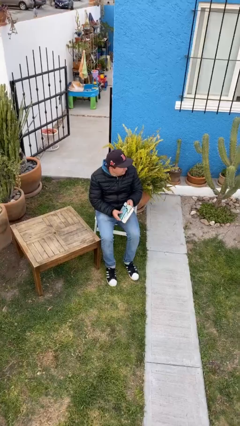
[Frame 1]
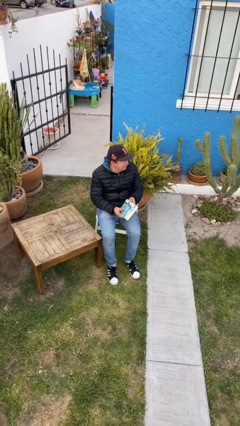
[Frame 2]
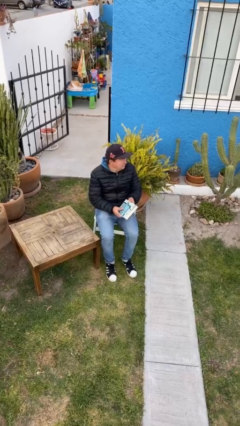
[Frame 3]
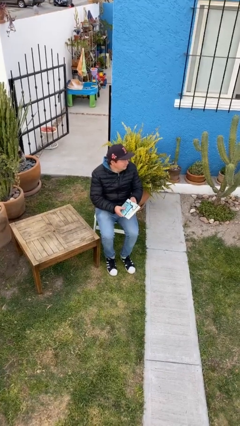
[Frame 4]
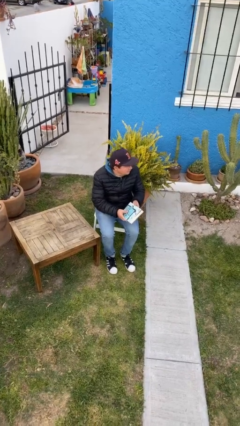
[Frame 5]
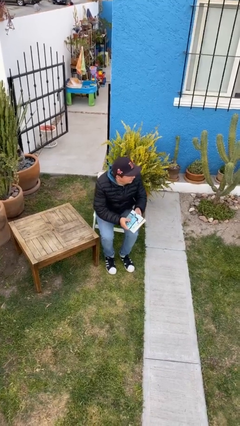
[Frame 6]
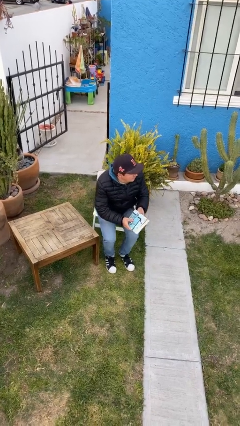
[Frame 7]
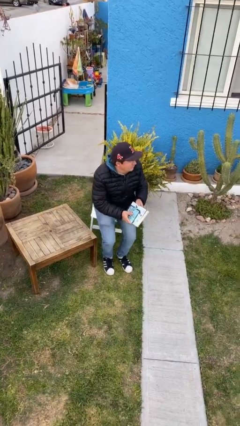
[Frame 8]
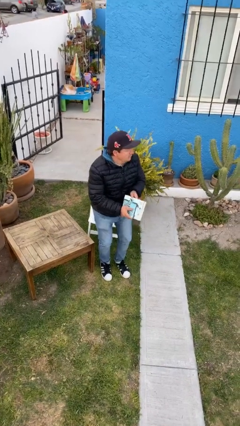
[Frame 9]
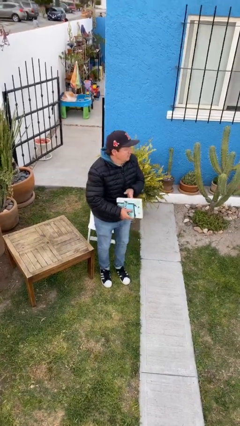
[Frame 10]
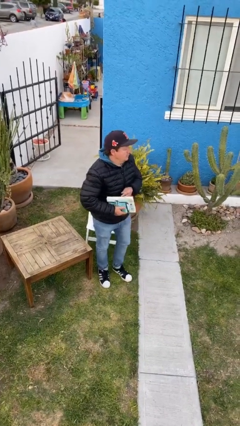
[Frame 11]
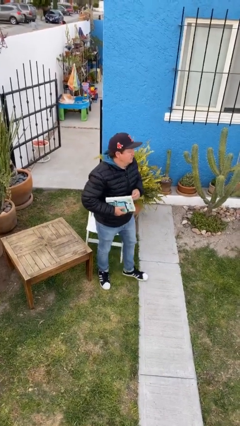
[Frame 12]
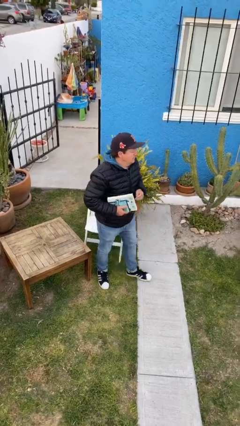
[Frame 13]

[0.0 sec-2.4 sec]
person stands up

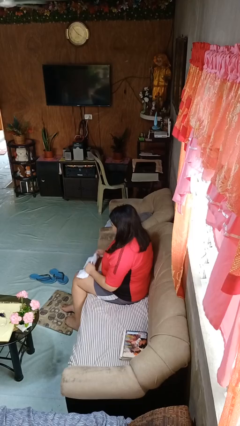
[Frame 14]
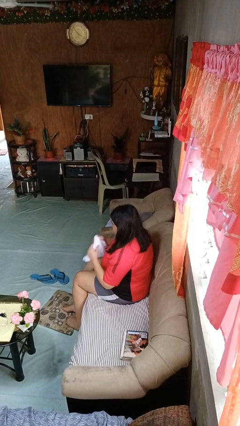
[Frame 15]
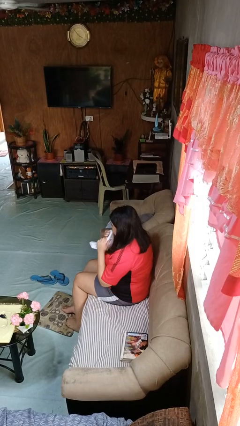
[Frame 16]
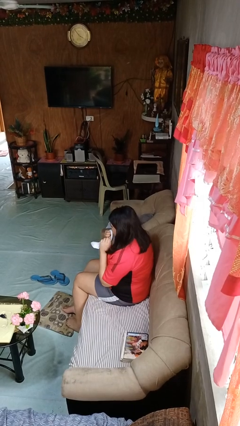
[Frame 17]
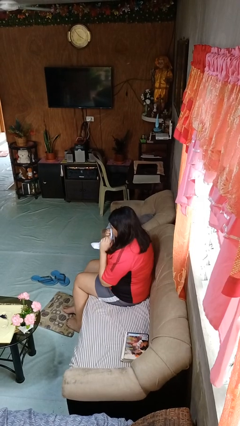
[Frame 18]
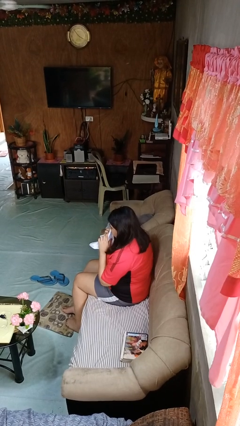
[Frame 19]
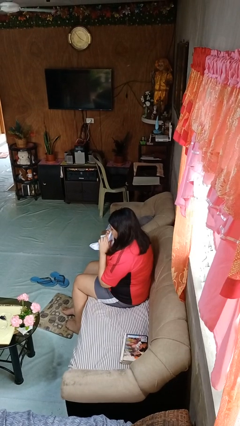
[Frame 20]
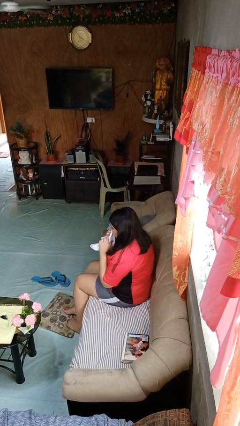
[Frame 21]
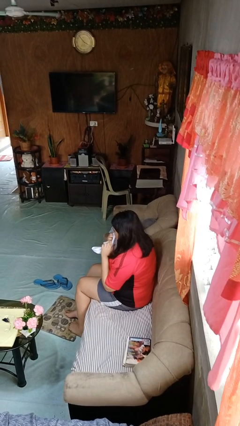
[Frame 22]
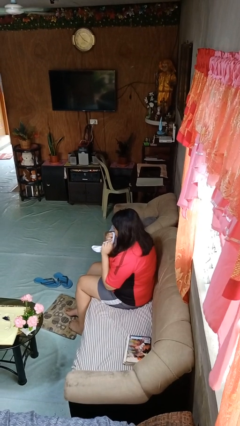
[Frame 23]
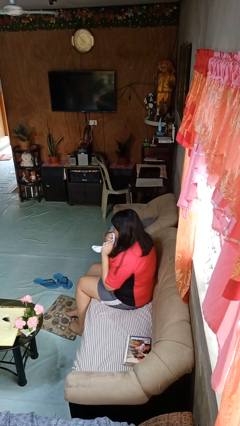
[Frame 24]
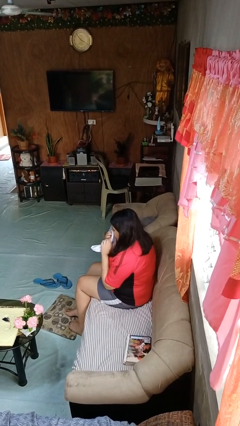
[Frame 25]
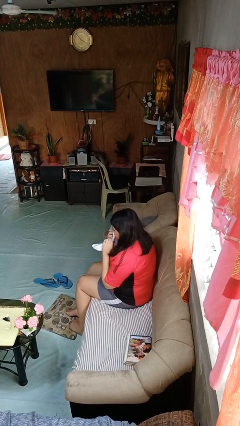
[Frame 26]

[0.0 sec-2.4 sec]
person wipes mouth with napkin

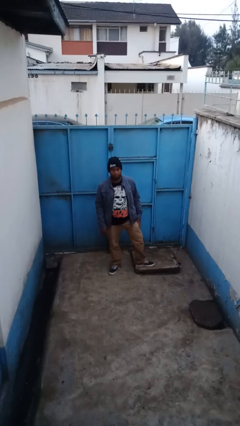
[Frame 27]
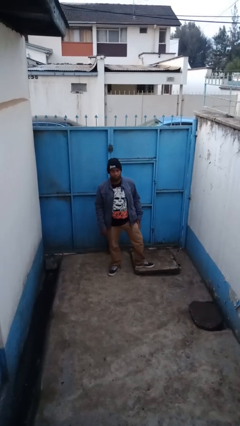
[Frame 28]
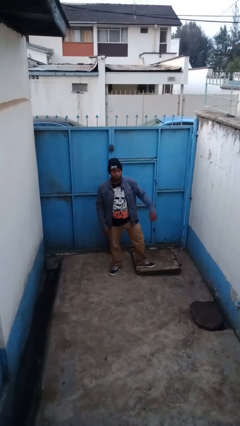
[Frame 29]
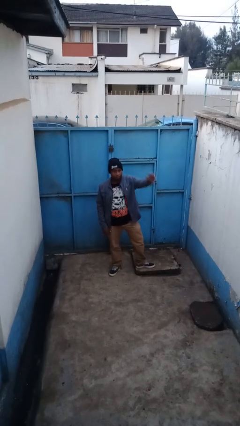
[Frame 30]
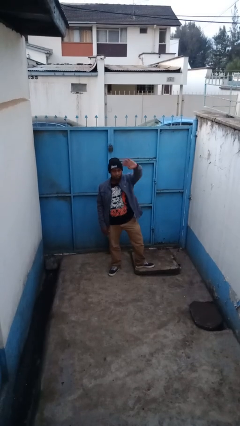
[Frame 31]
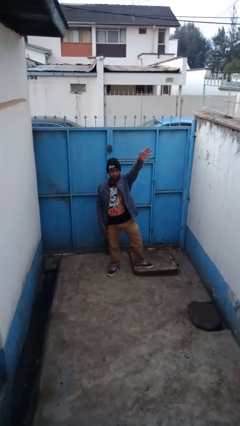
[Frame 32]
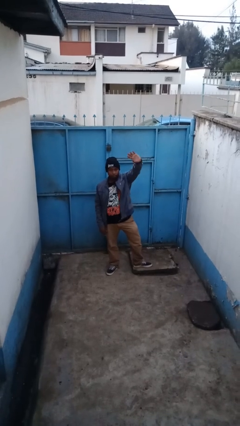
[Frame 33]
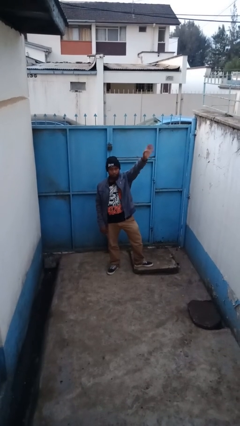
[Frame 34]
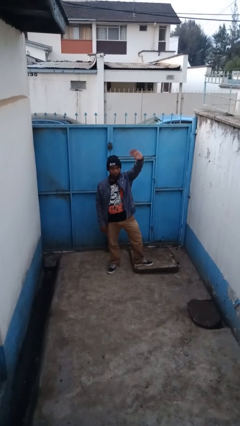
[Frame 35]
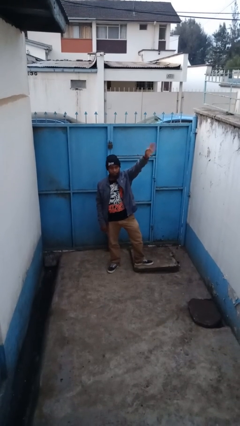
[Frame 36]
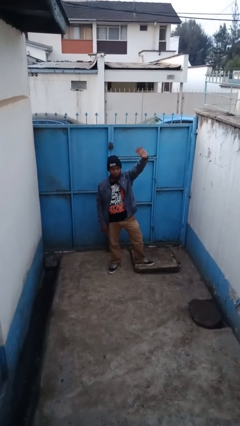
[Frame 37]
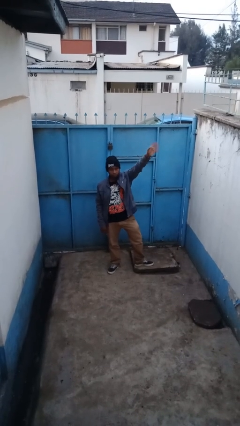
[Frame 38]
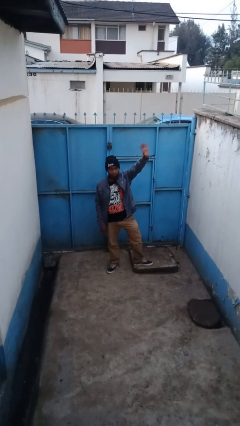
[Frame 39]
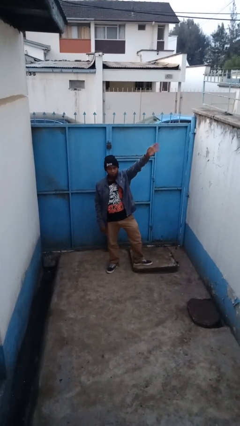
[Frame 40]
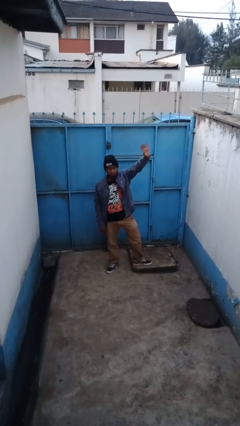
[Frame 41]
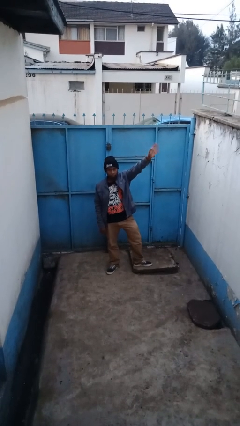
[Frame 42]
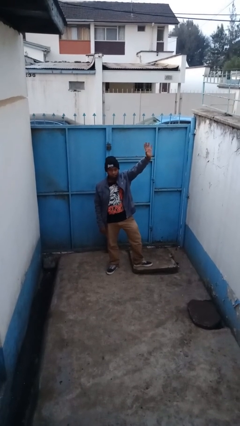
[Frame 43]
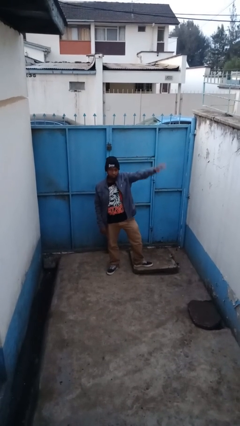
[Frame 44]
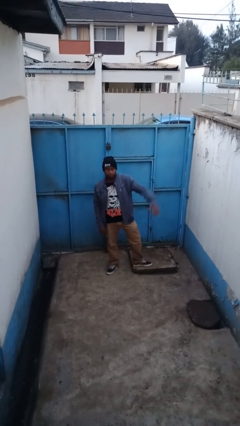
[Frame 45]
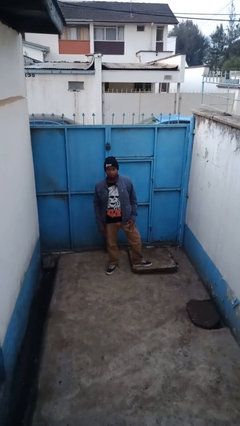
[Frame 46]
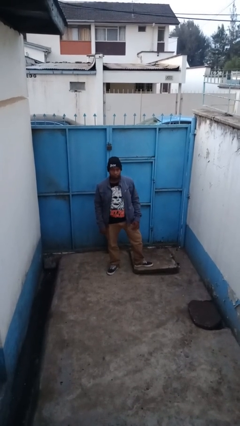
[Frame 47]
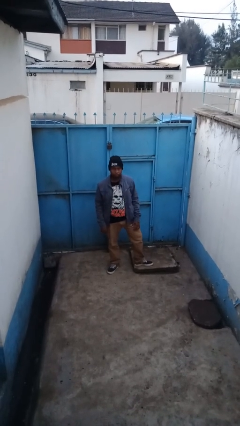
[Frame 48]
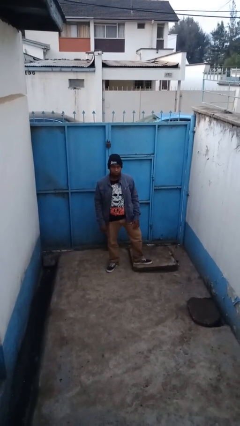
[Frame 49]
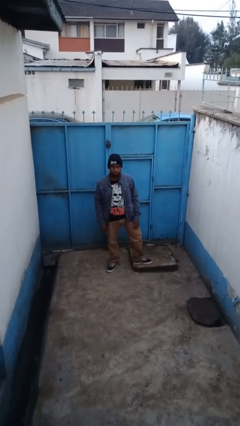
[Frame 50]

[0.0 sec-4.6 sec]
person waves at person

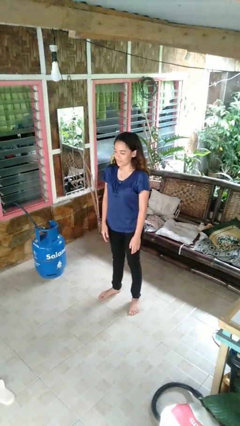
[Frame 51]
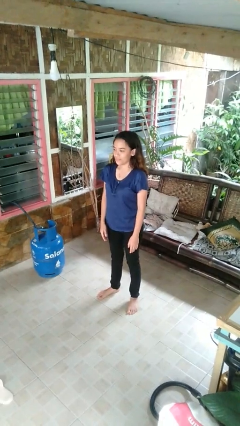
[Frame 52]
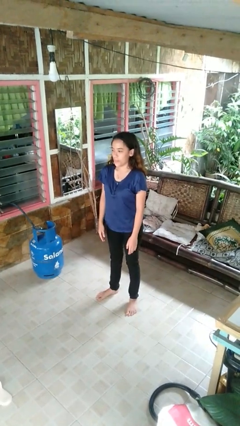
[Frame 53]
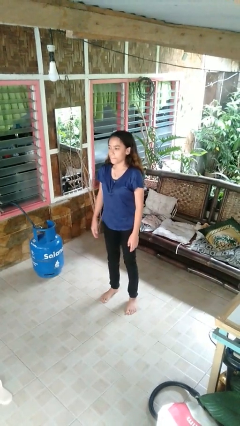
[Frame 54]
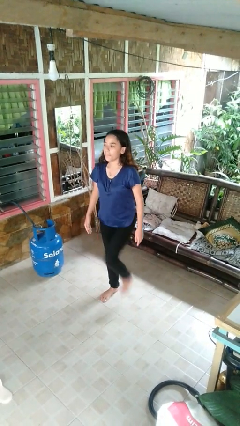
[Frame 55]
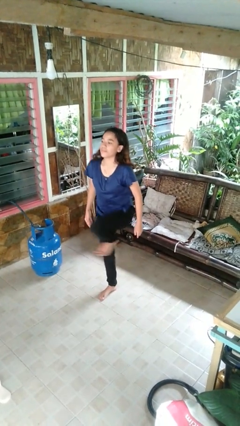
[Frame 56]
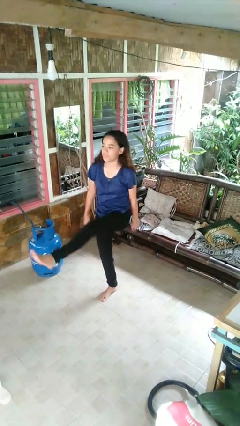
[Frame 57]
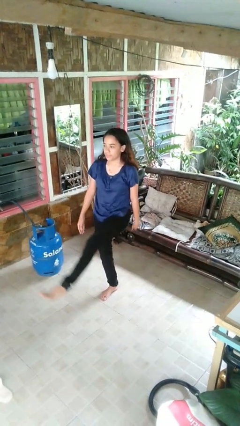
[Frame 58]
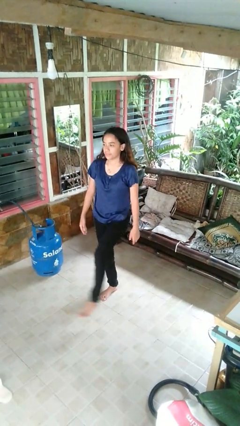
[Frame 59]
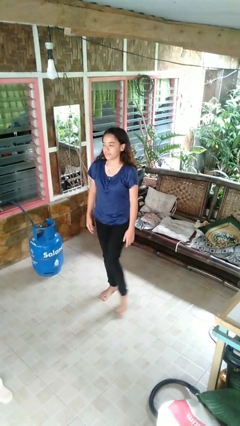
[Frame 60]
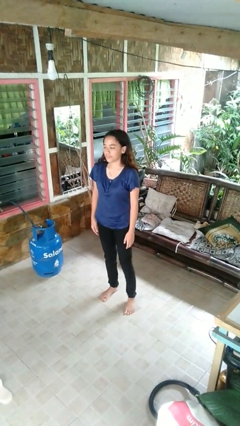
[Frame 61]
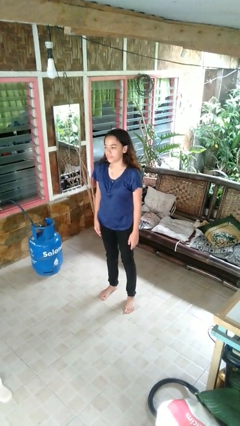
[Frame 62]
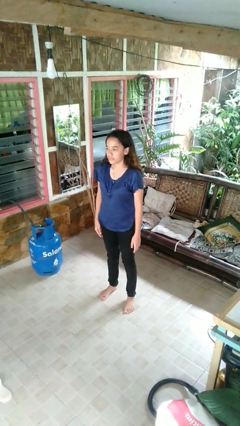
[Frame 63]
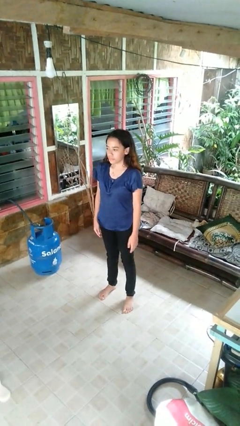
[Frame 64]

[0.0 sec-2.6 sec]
person karate kicks

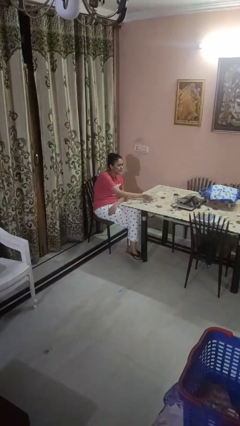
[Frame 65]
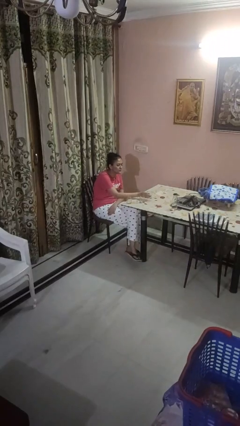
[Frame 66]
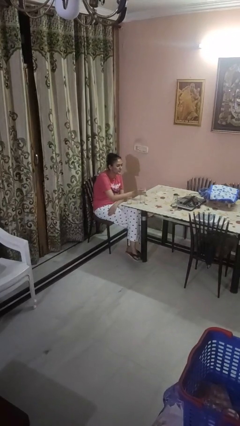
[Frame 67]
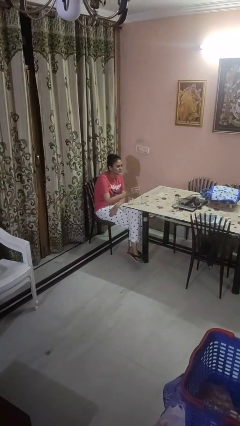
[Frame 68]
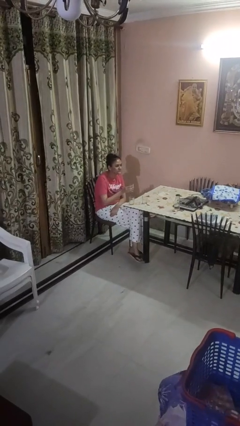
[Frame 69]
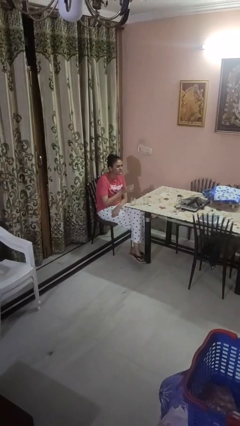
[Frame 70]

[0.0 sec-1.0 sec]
person picks up object from table

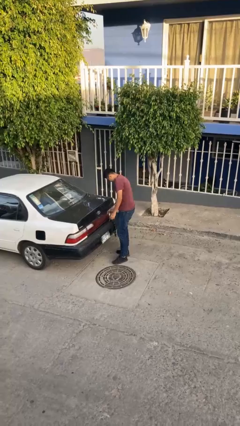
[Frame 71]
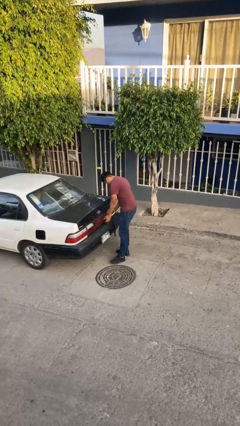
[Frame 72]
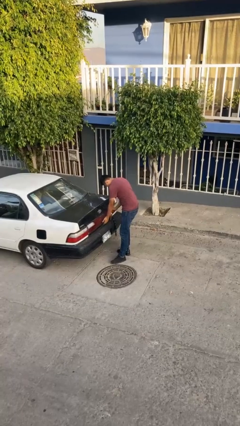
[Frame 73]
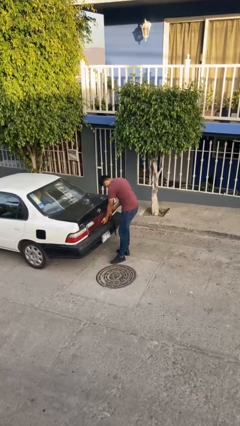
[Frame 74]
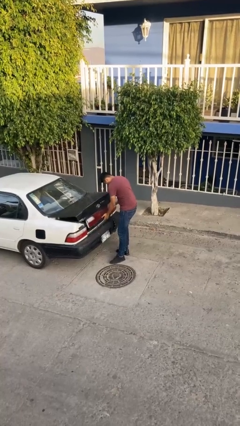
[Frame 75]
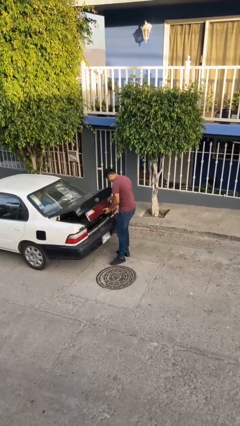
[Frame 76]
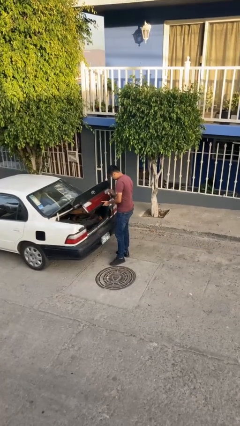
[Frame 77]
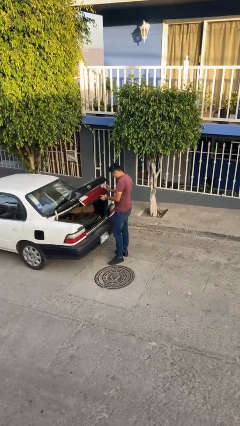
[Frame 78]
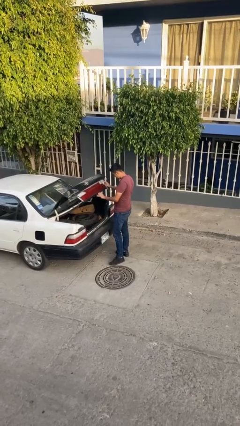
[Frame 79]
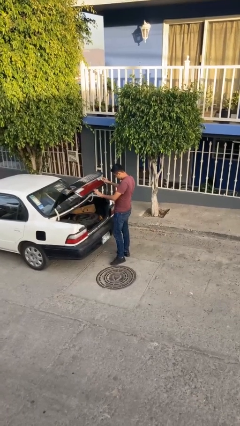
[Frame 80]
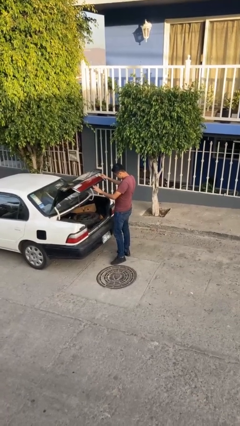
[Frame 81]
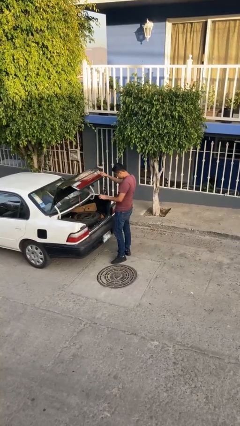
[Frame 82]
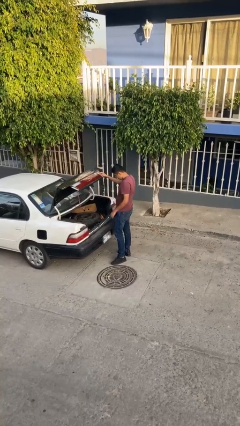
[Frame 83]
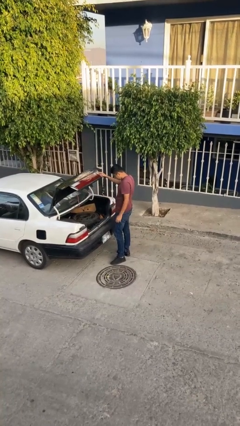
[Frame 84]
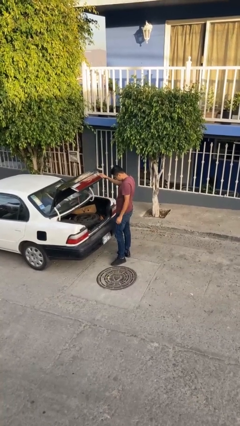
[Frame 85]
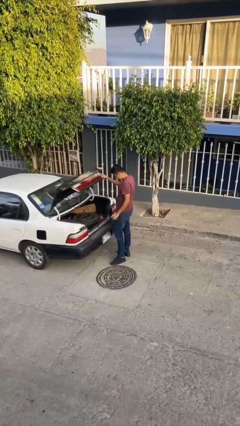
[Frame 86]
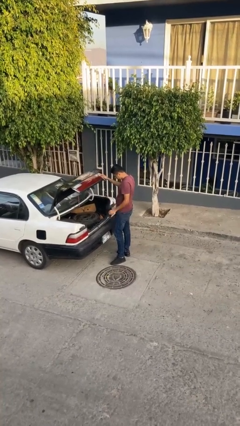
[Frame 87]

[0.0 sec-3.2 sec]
person opens car trunk

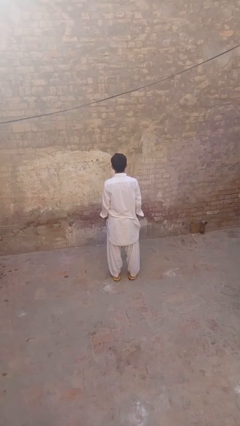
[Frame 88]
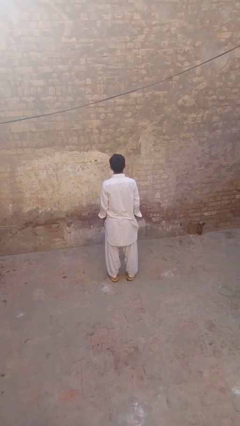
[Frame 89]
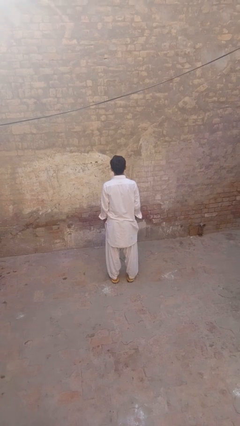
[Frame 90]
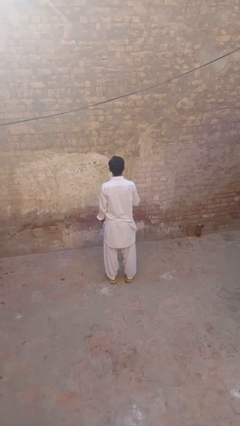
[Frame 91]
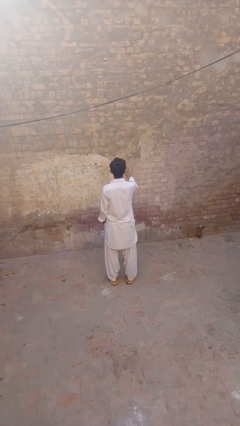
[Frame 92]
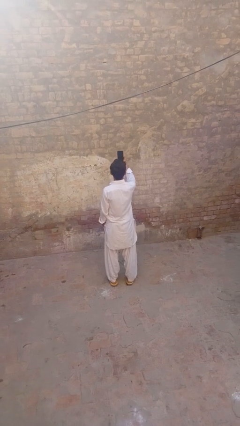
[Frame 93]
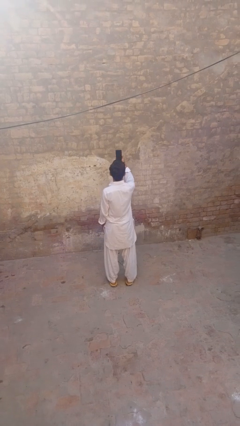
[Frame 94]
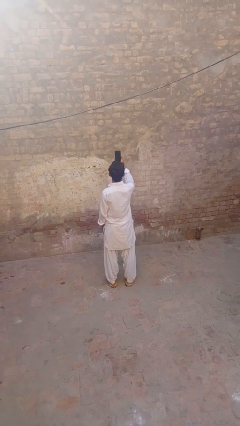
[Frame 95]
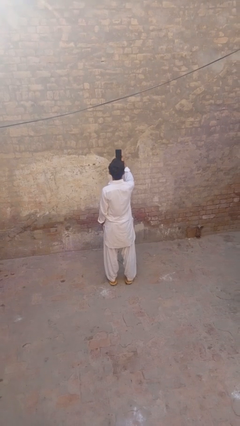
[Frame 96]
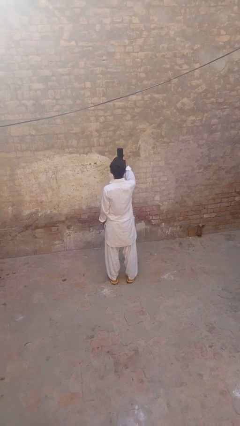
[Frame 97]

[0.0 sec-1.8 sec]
person takes selfie
